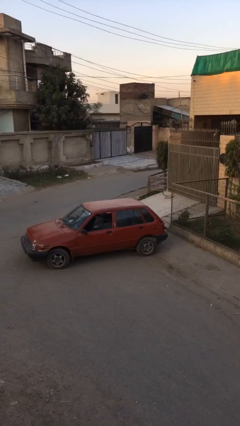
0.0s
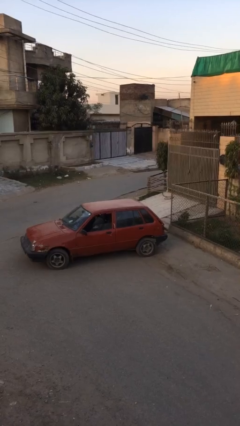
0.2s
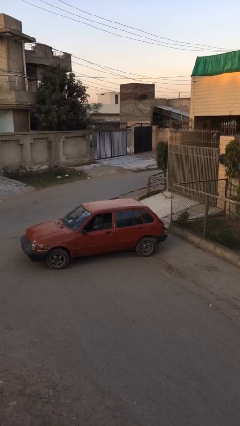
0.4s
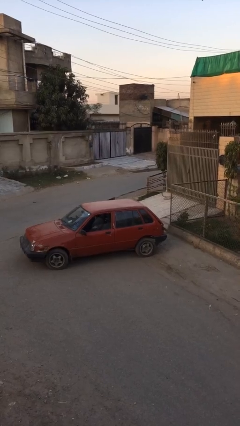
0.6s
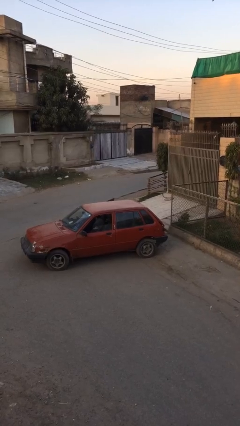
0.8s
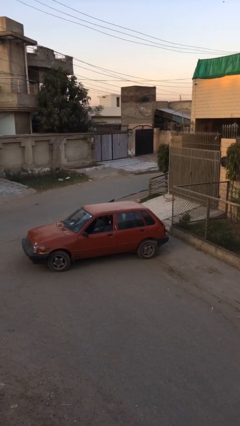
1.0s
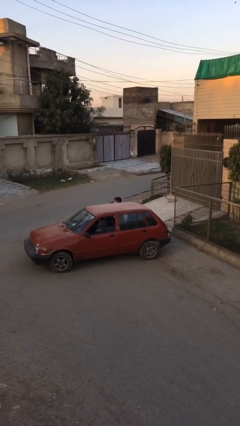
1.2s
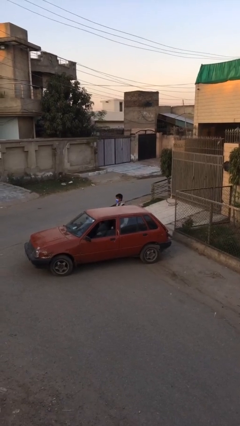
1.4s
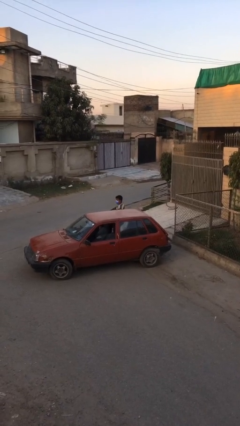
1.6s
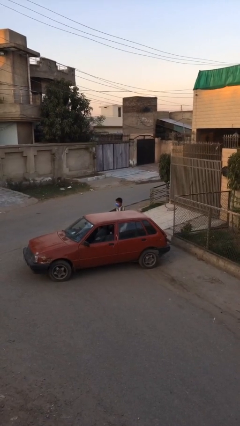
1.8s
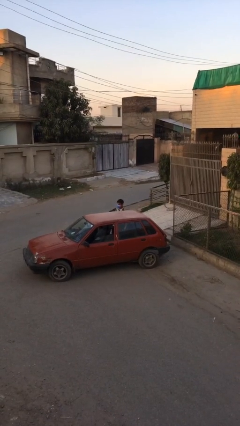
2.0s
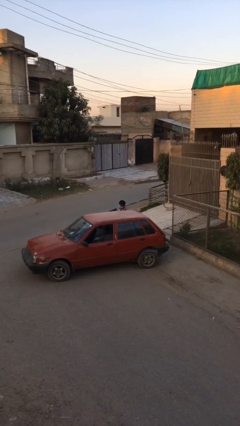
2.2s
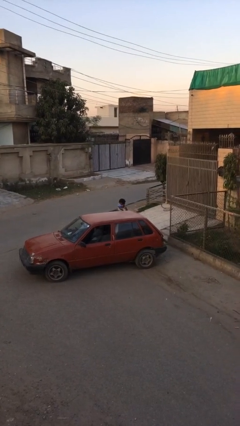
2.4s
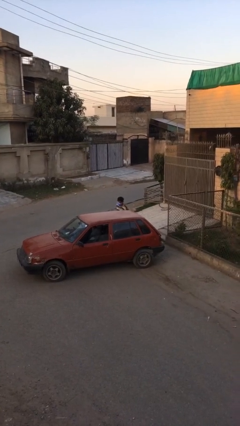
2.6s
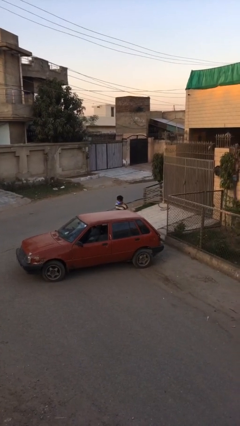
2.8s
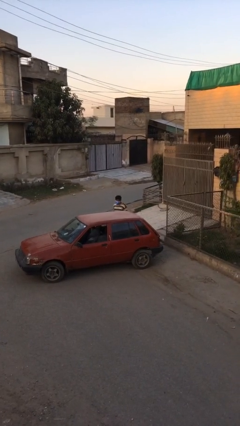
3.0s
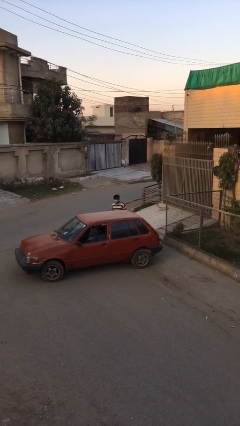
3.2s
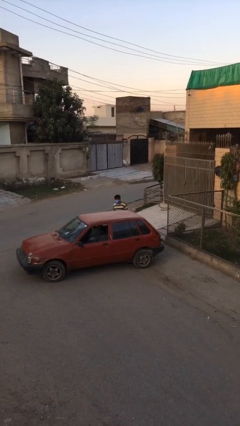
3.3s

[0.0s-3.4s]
person exits car

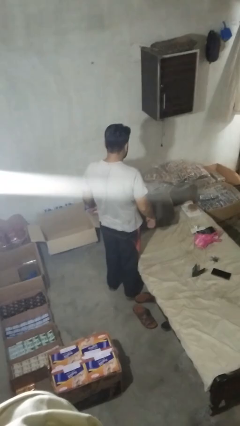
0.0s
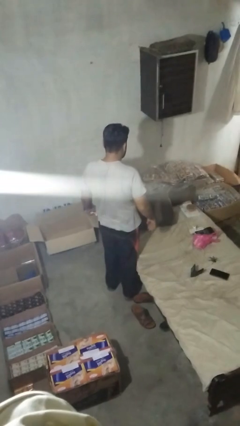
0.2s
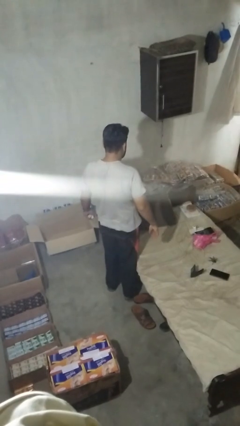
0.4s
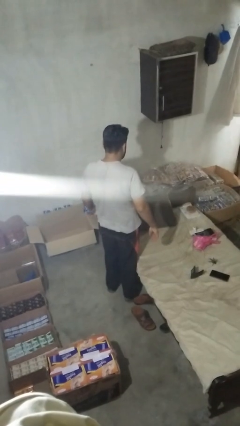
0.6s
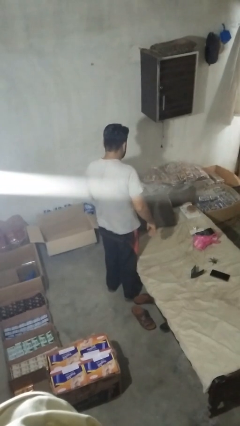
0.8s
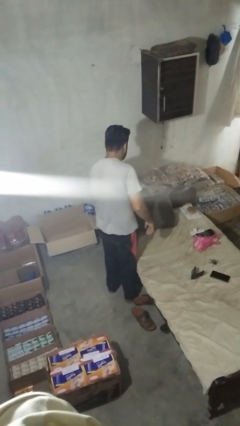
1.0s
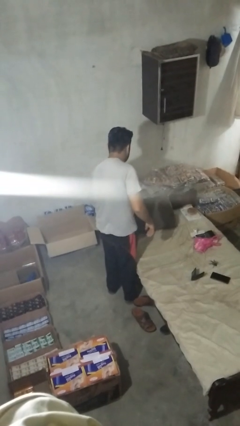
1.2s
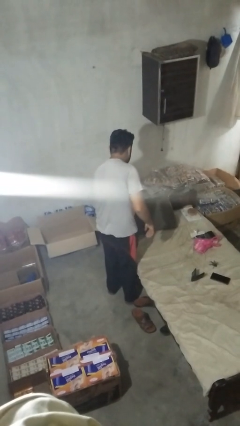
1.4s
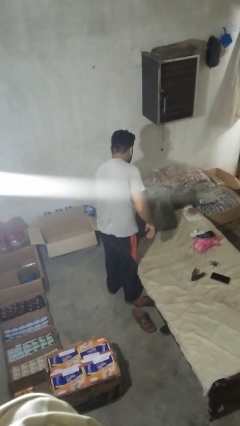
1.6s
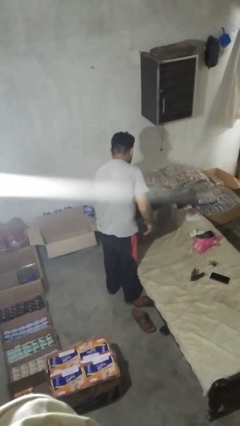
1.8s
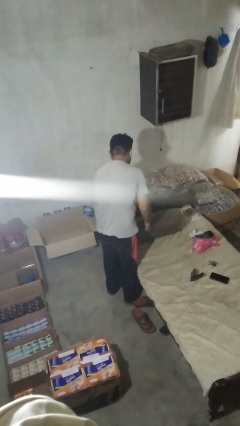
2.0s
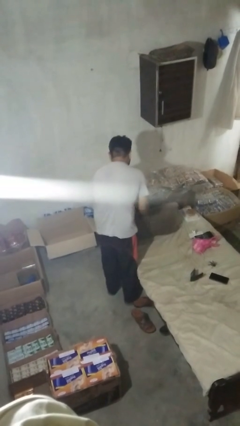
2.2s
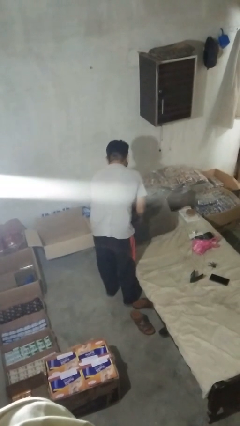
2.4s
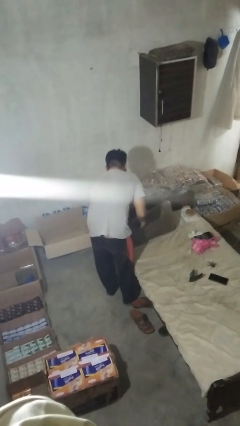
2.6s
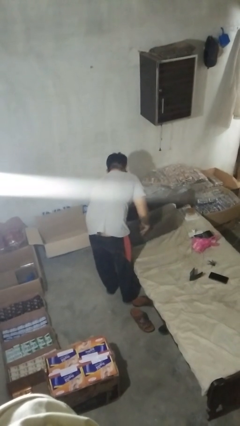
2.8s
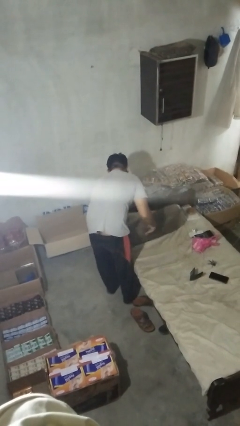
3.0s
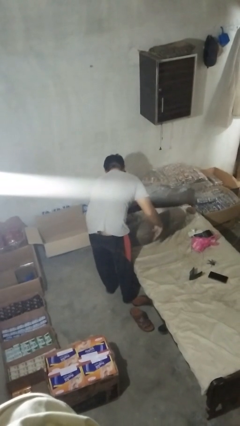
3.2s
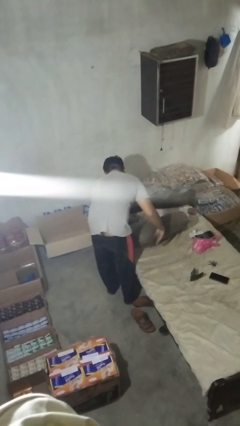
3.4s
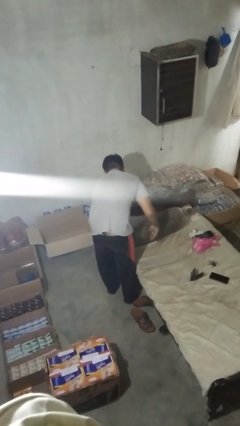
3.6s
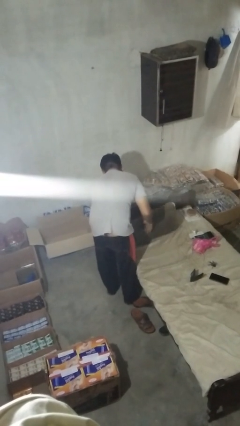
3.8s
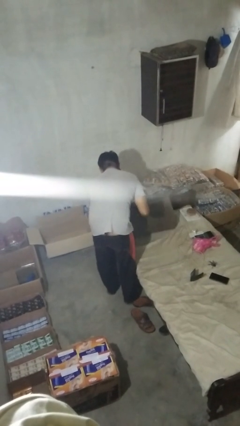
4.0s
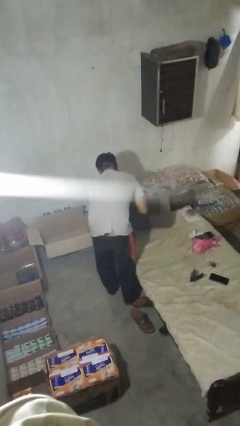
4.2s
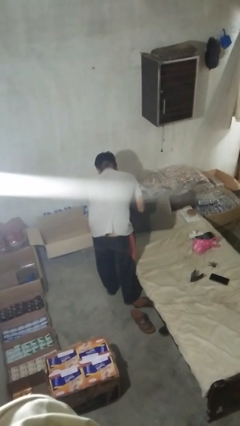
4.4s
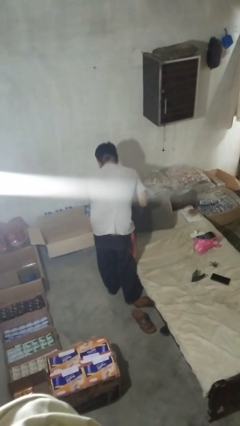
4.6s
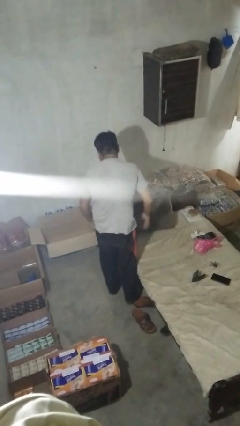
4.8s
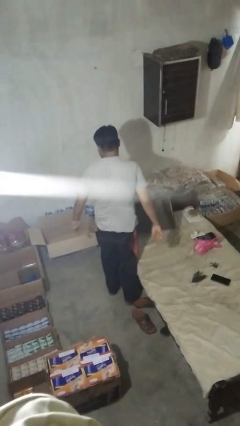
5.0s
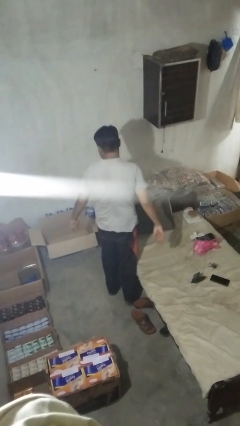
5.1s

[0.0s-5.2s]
person searches in couch

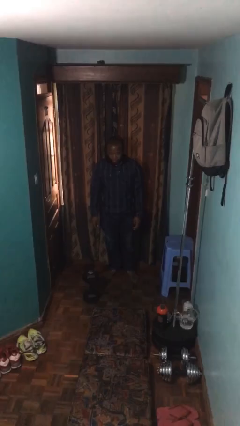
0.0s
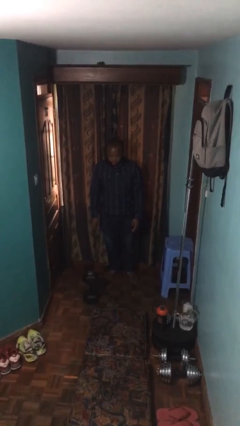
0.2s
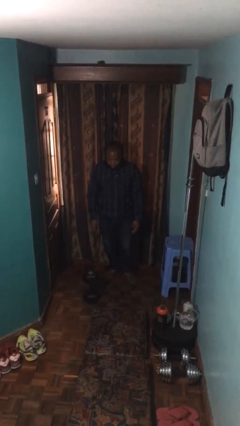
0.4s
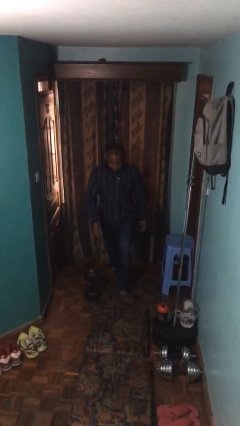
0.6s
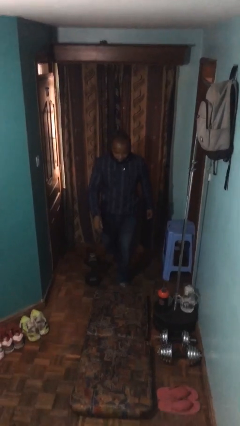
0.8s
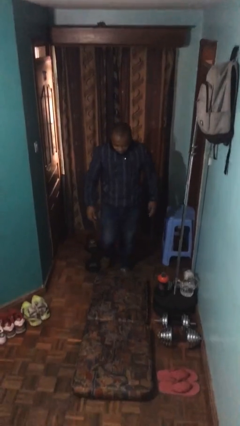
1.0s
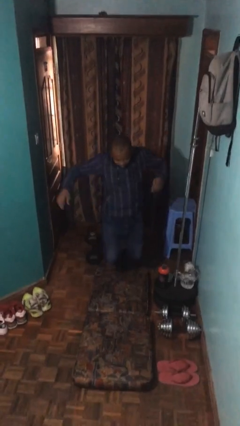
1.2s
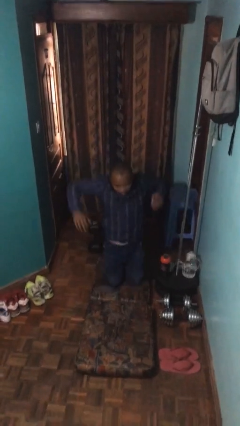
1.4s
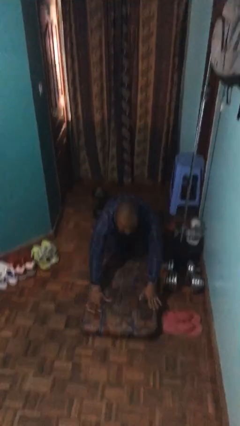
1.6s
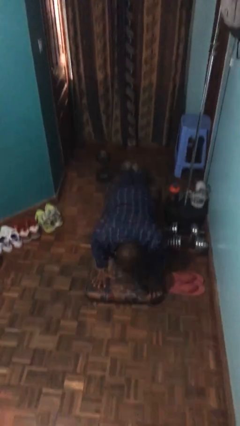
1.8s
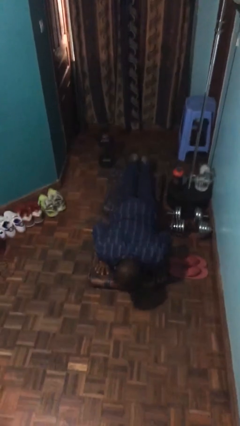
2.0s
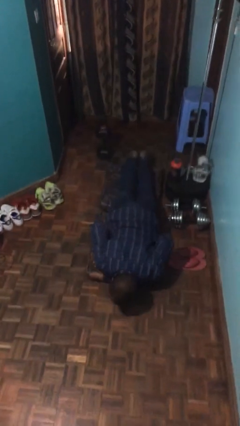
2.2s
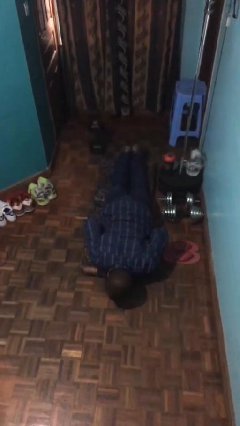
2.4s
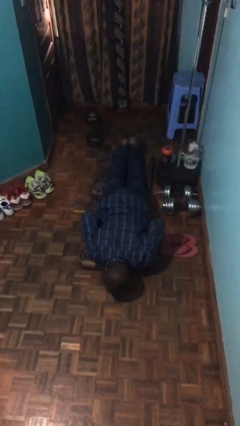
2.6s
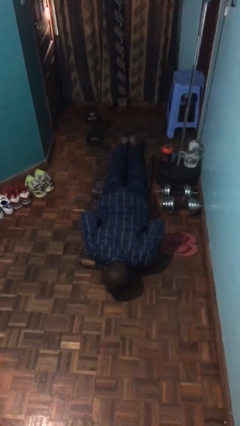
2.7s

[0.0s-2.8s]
person trips on object on floor

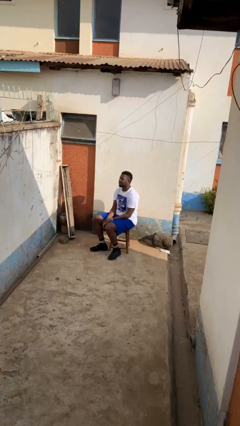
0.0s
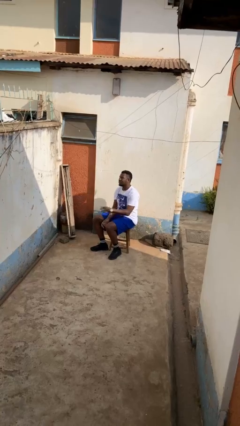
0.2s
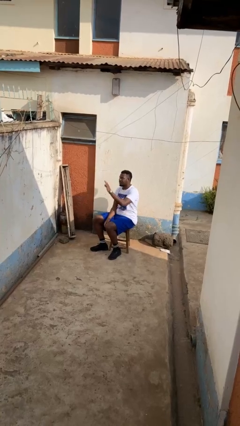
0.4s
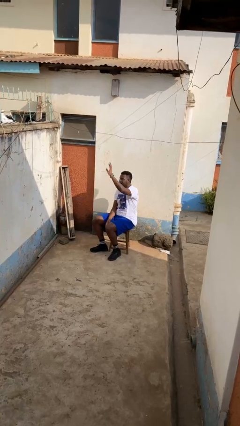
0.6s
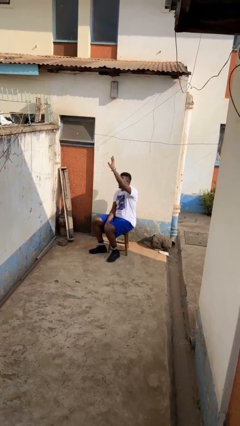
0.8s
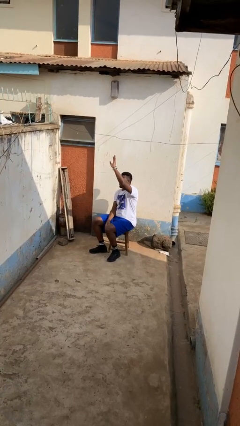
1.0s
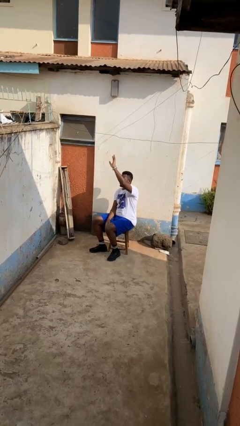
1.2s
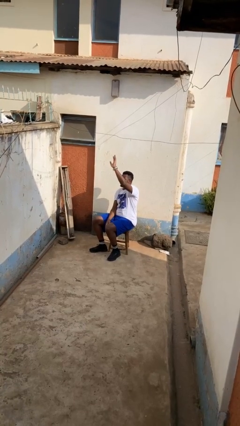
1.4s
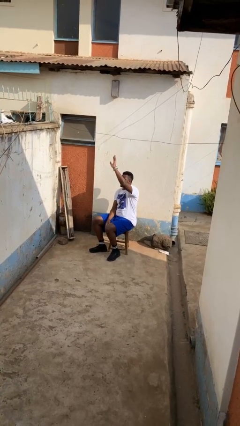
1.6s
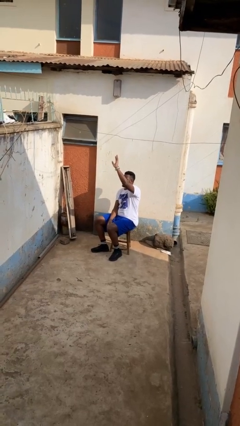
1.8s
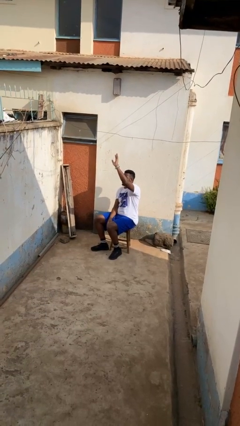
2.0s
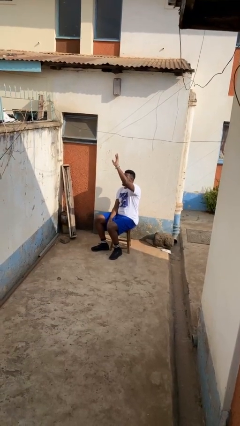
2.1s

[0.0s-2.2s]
person gestures raise hand

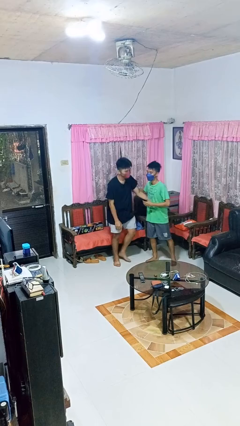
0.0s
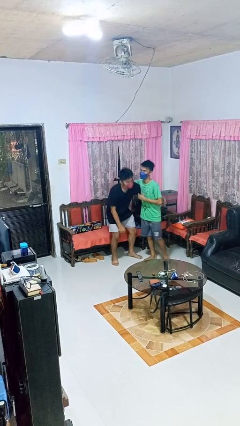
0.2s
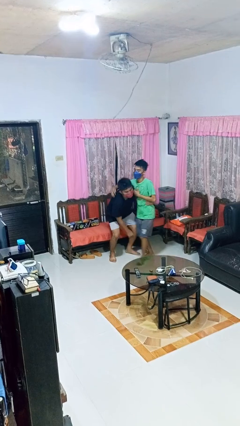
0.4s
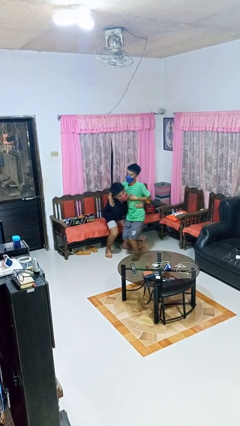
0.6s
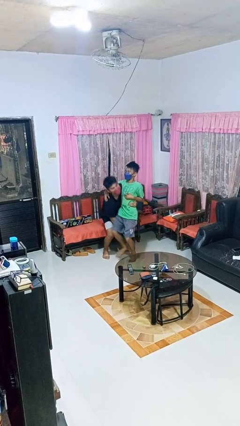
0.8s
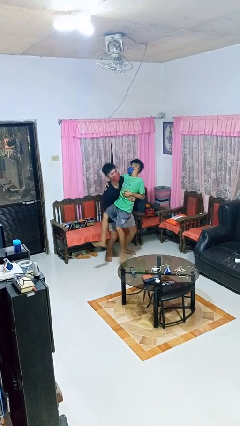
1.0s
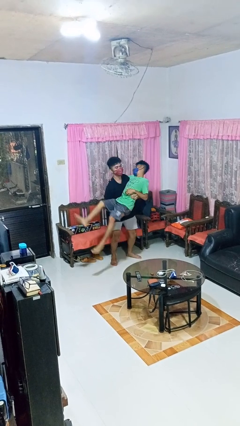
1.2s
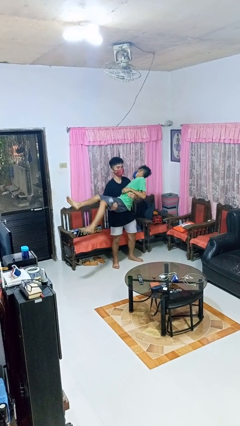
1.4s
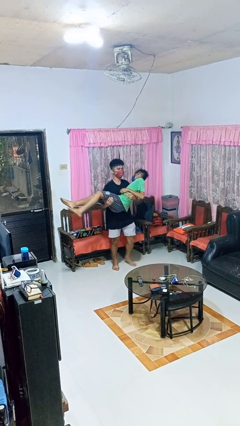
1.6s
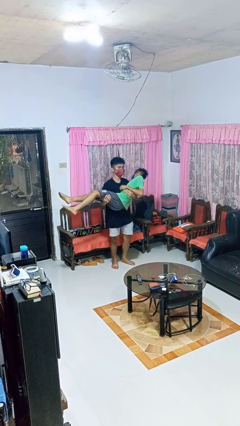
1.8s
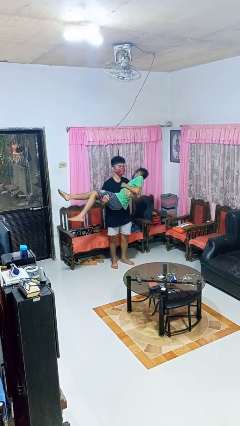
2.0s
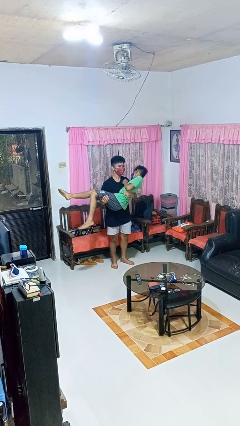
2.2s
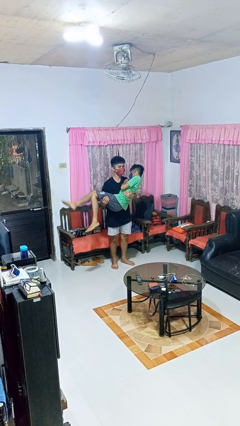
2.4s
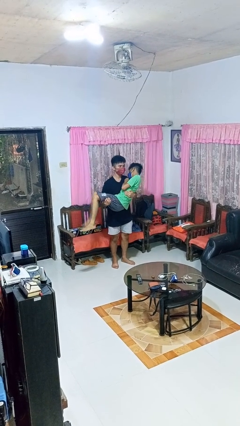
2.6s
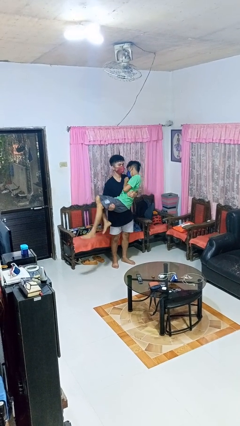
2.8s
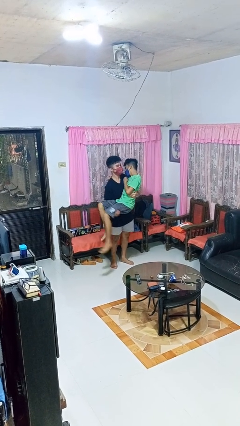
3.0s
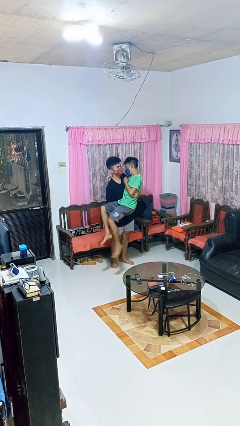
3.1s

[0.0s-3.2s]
person picks up person

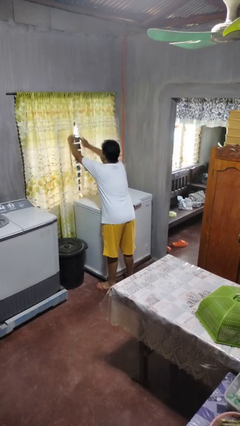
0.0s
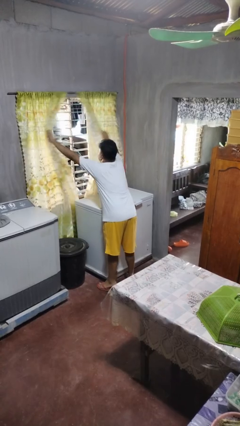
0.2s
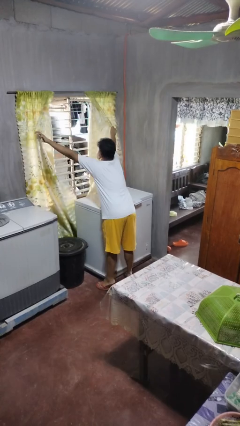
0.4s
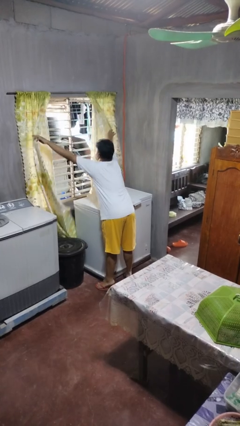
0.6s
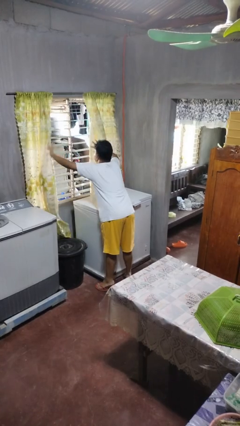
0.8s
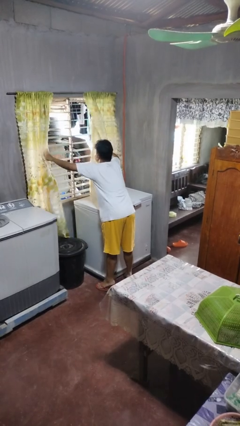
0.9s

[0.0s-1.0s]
person opens curtains
